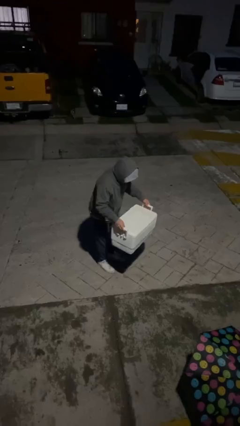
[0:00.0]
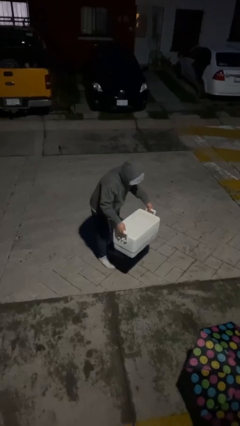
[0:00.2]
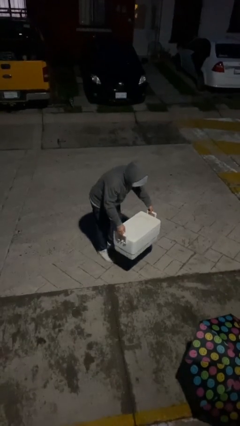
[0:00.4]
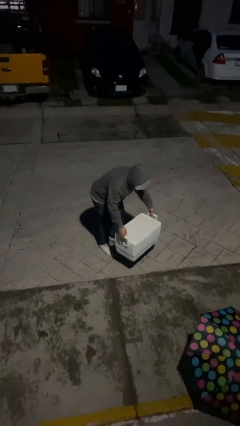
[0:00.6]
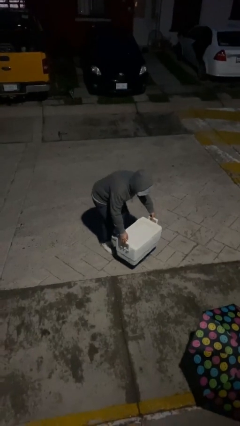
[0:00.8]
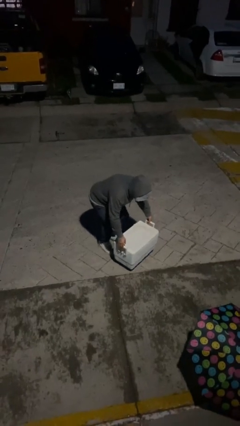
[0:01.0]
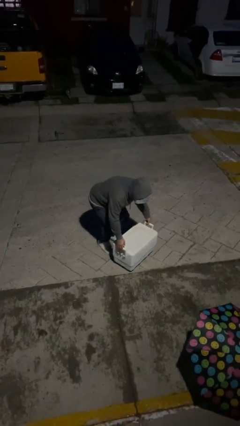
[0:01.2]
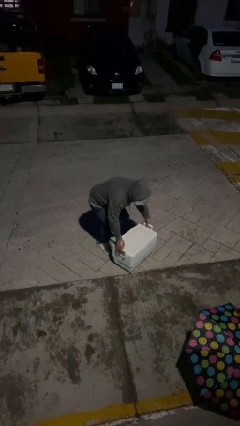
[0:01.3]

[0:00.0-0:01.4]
person puts down object on floor

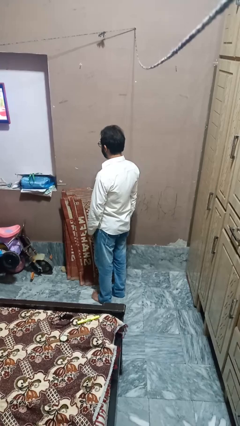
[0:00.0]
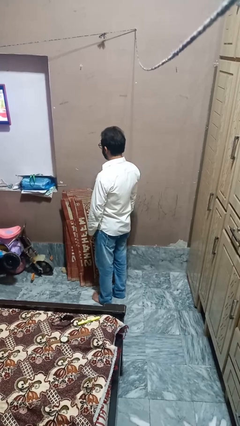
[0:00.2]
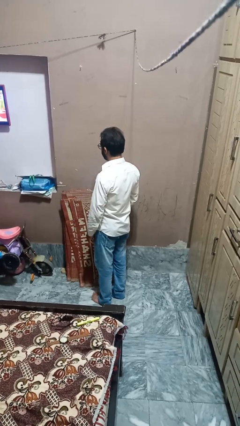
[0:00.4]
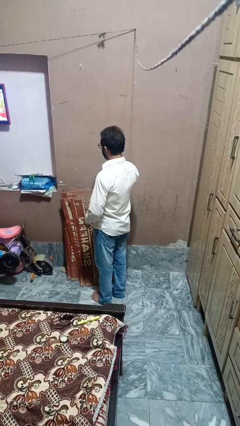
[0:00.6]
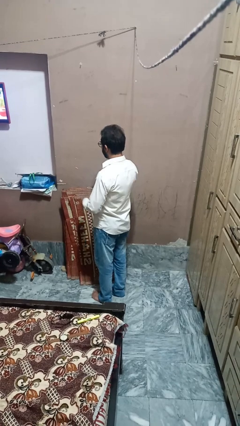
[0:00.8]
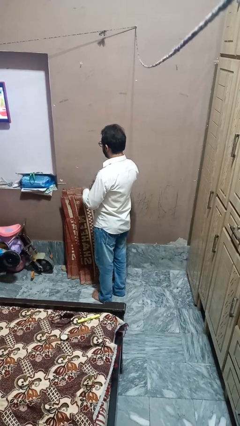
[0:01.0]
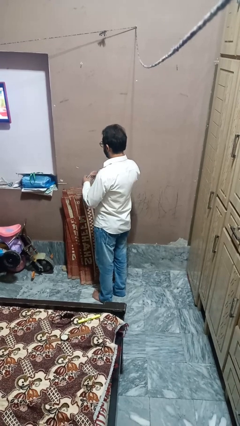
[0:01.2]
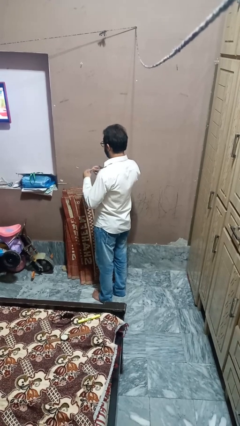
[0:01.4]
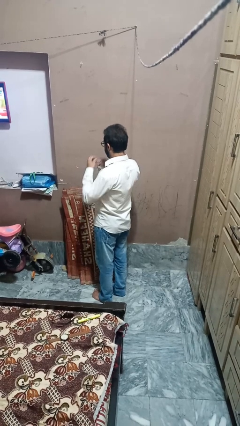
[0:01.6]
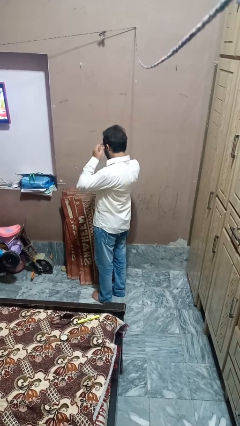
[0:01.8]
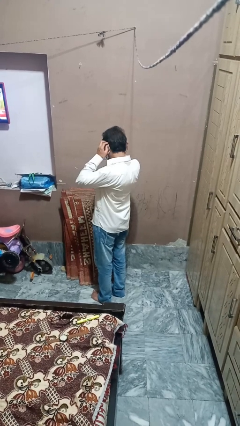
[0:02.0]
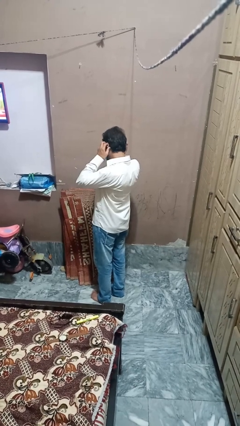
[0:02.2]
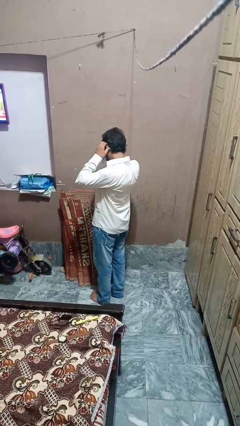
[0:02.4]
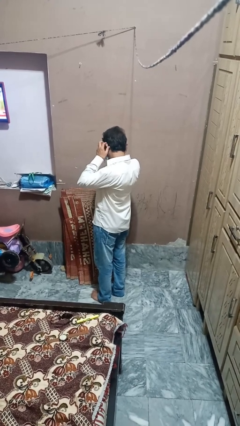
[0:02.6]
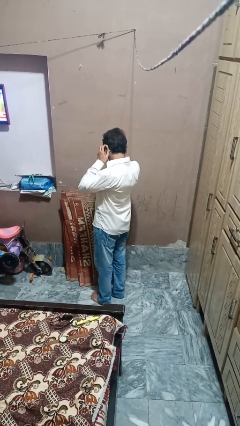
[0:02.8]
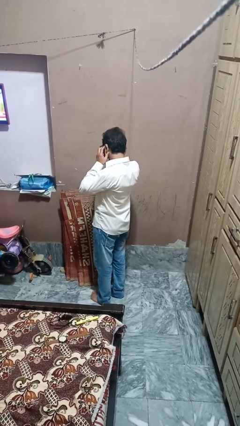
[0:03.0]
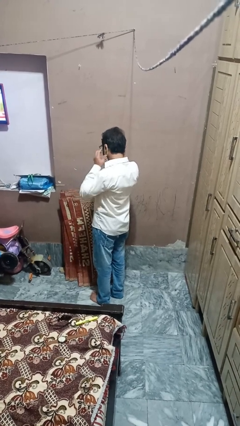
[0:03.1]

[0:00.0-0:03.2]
person puts on earrings

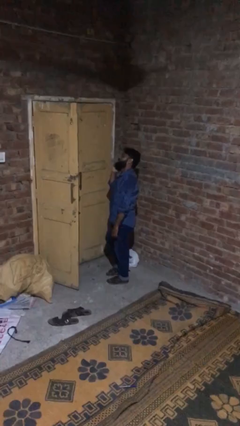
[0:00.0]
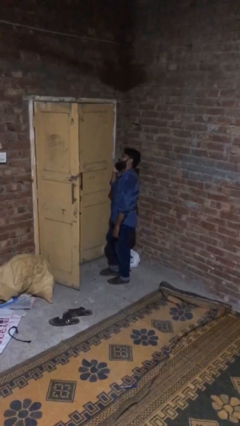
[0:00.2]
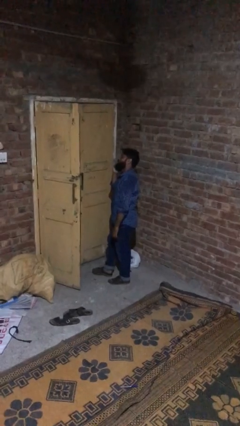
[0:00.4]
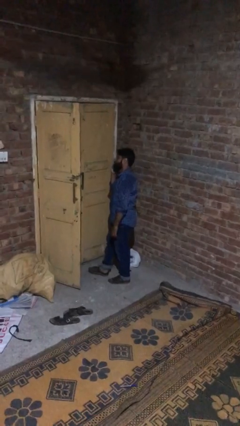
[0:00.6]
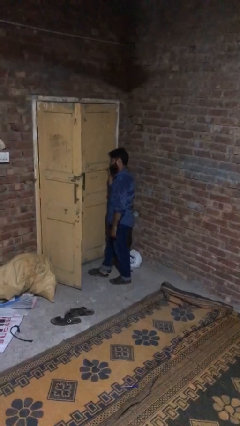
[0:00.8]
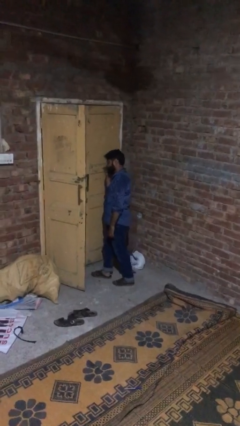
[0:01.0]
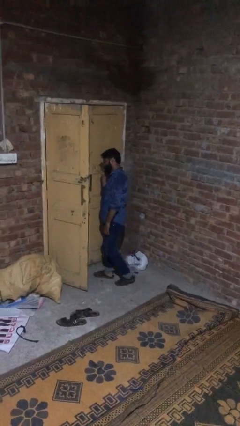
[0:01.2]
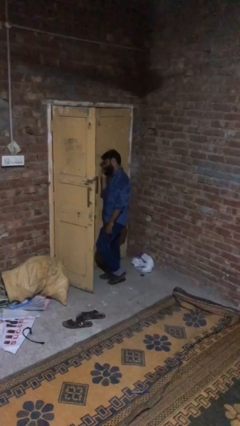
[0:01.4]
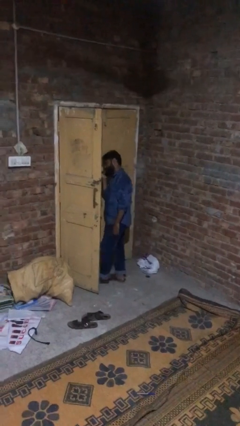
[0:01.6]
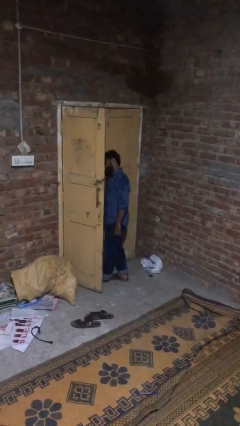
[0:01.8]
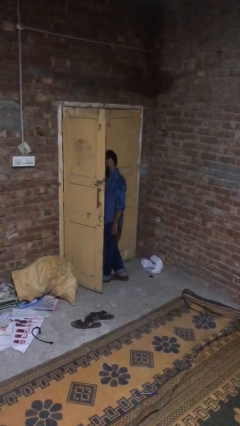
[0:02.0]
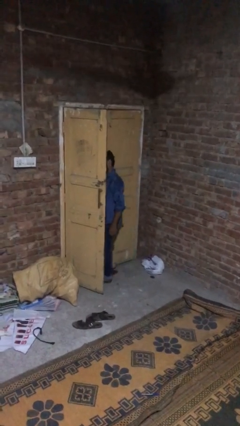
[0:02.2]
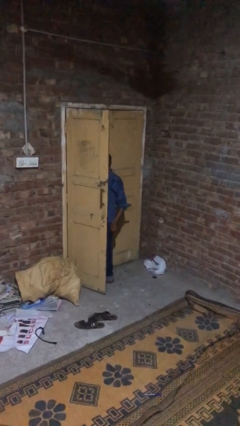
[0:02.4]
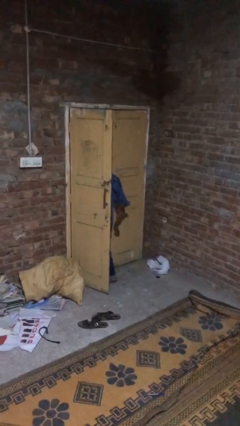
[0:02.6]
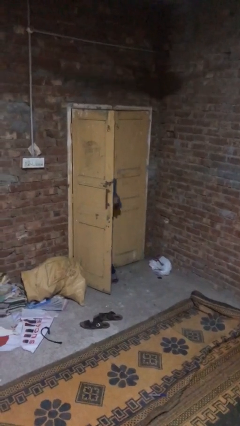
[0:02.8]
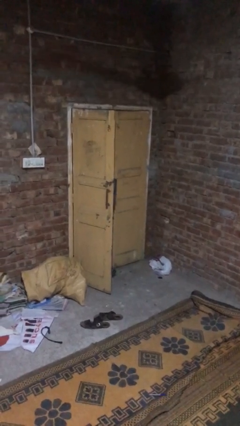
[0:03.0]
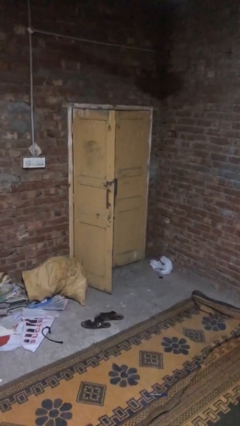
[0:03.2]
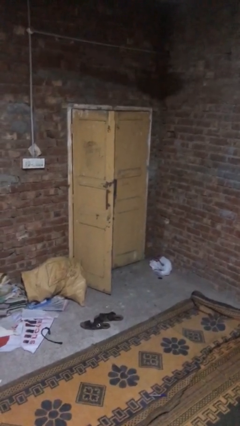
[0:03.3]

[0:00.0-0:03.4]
person exits scene through structure

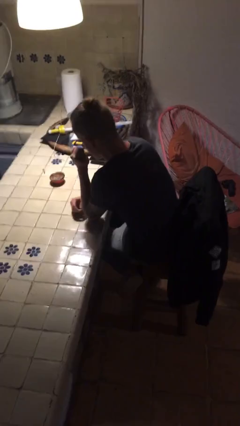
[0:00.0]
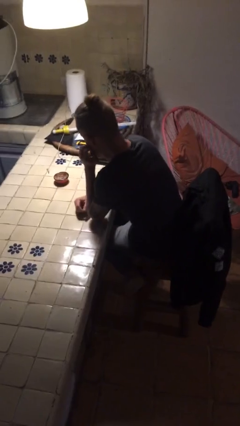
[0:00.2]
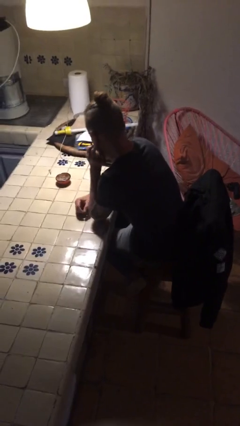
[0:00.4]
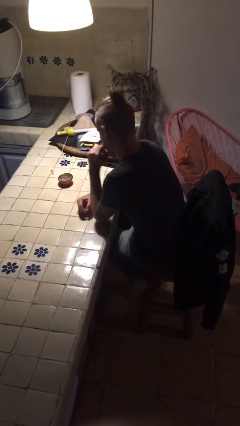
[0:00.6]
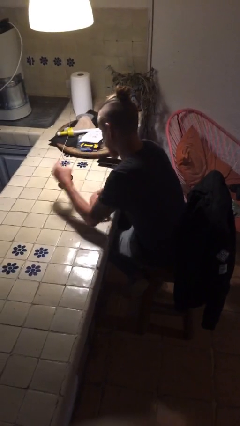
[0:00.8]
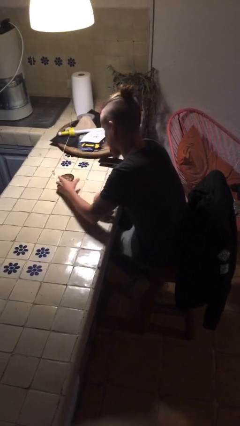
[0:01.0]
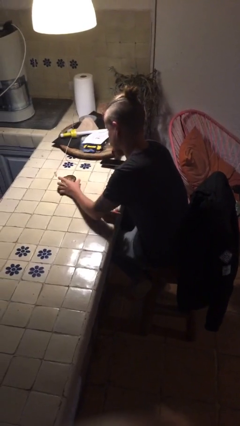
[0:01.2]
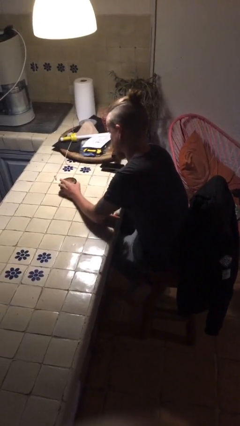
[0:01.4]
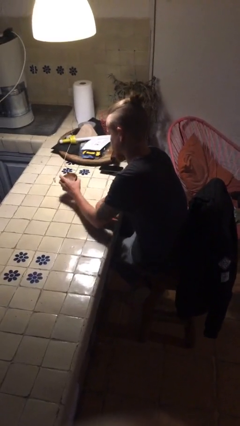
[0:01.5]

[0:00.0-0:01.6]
person picks up object from table

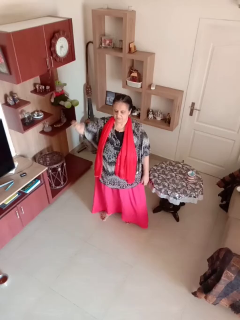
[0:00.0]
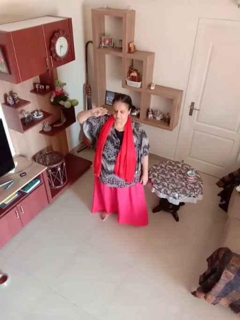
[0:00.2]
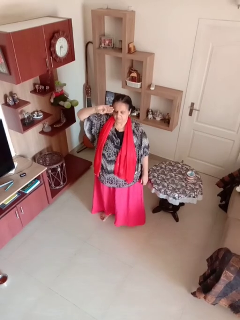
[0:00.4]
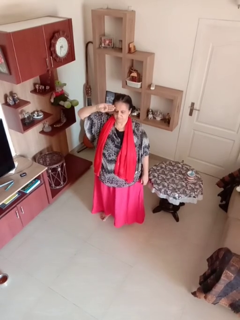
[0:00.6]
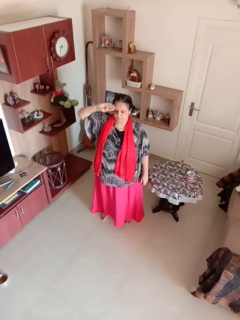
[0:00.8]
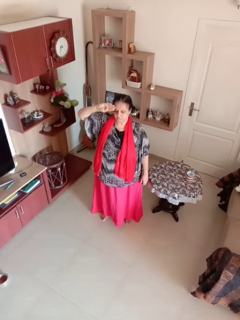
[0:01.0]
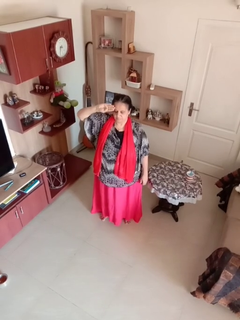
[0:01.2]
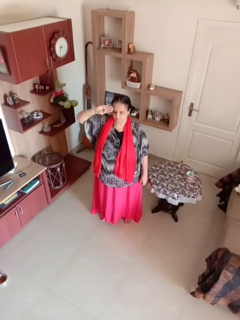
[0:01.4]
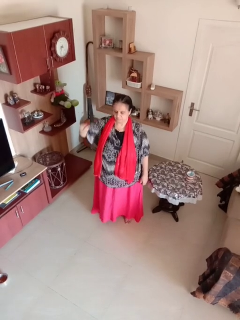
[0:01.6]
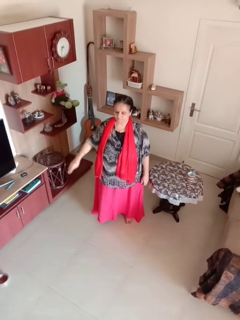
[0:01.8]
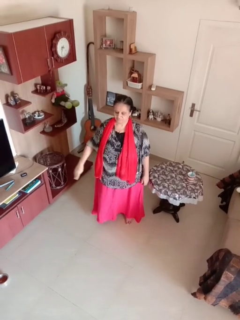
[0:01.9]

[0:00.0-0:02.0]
person salutes

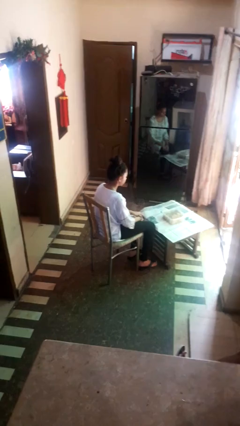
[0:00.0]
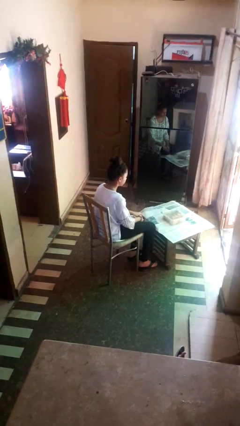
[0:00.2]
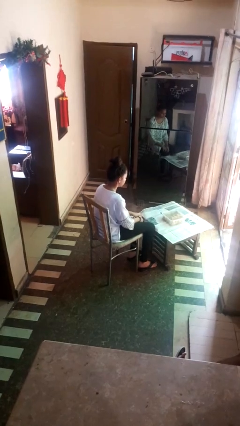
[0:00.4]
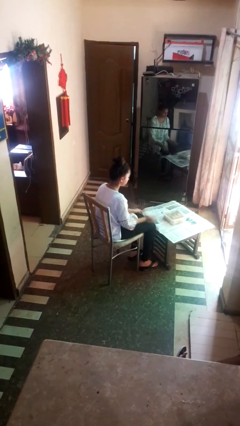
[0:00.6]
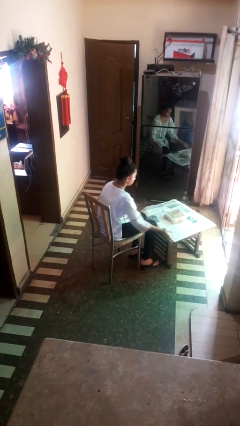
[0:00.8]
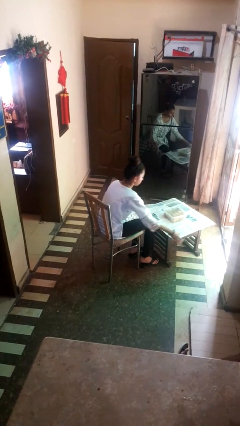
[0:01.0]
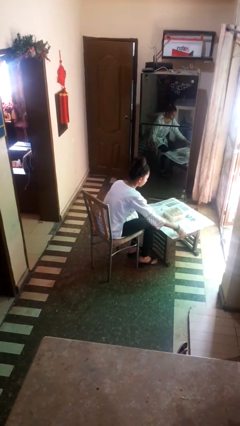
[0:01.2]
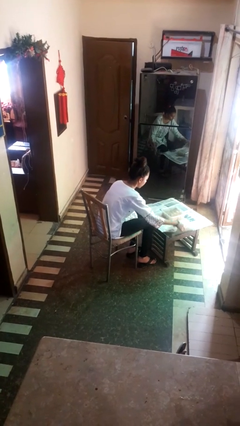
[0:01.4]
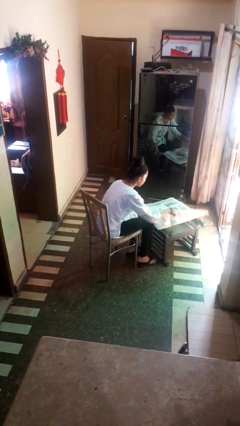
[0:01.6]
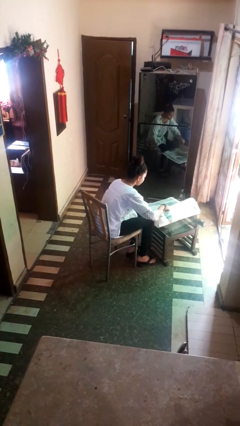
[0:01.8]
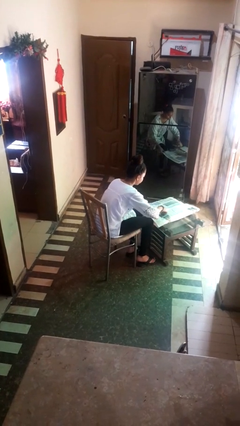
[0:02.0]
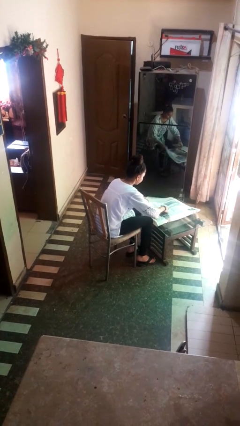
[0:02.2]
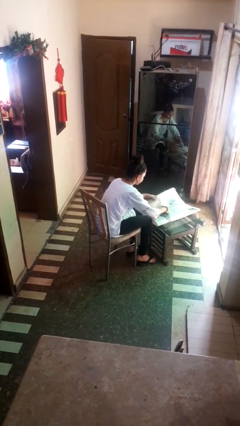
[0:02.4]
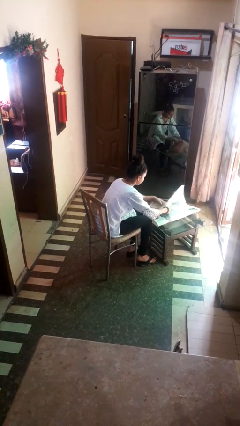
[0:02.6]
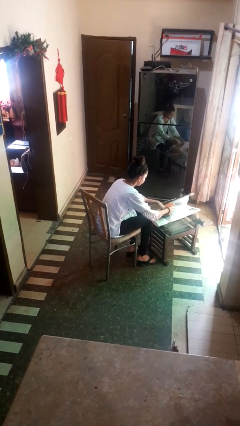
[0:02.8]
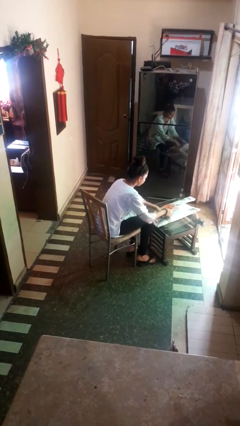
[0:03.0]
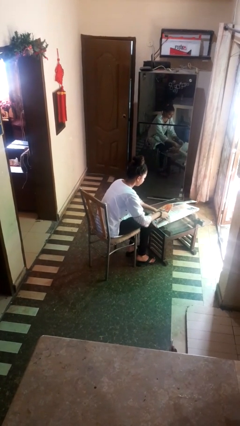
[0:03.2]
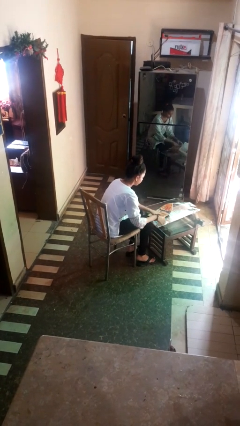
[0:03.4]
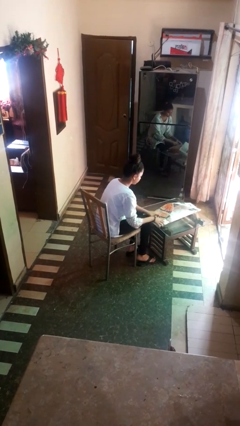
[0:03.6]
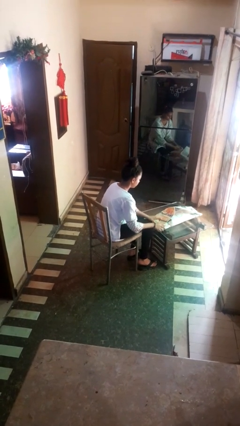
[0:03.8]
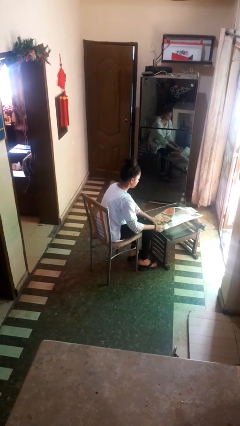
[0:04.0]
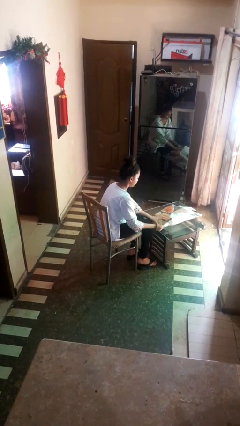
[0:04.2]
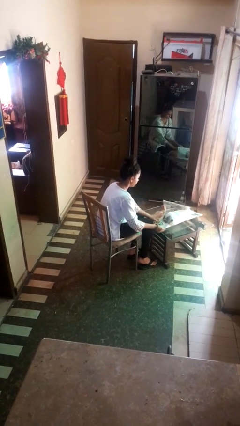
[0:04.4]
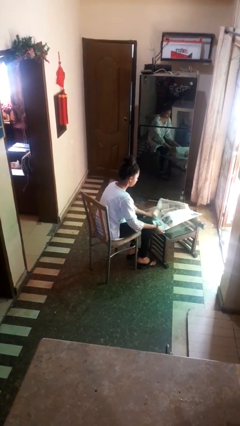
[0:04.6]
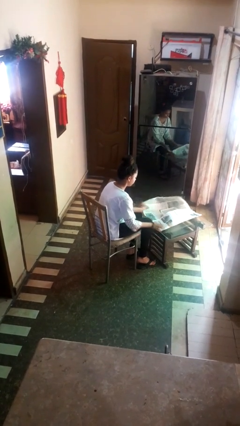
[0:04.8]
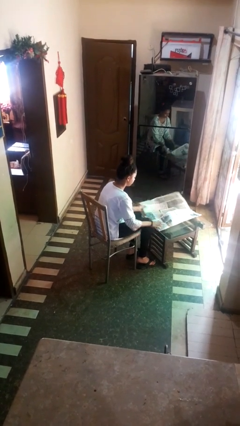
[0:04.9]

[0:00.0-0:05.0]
person wraps box

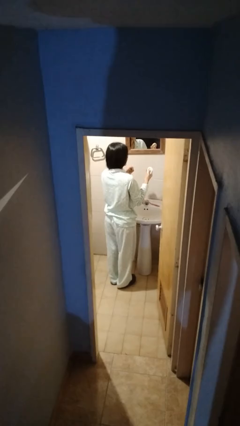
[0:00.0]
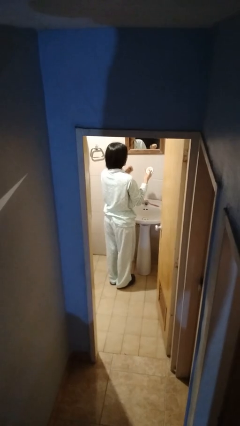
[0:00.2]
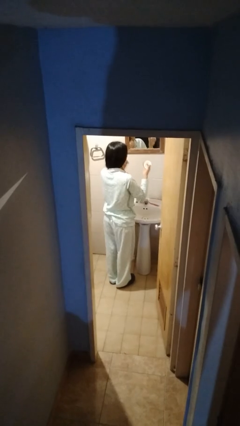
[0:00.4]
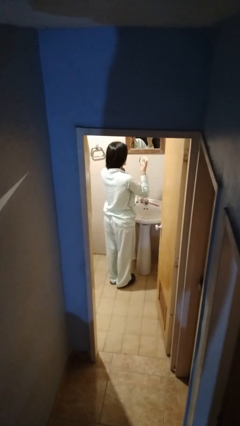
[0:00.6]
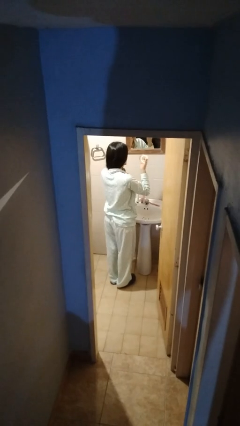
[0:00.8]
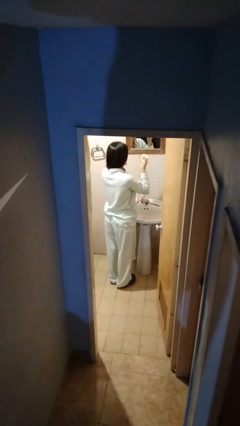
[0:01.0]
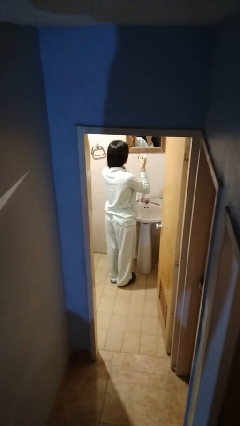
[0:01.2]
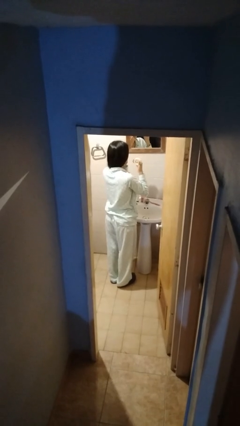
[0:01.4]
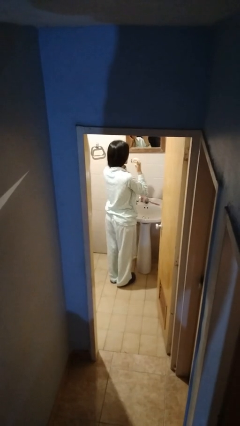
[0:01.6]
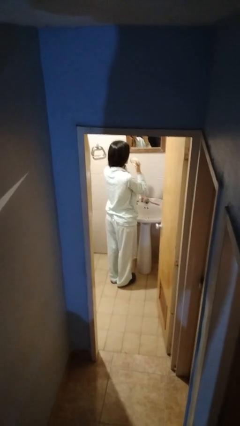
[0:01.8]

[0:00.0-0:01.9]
person flosses
